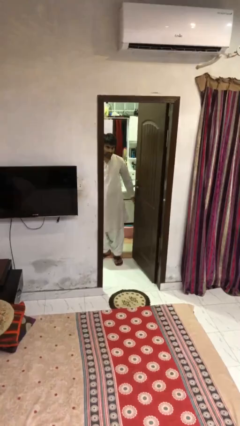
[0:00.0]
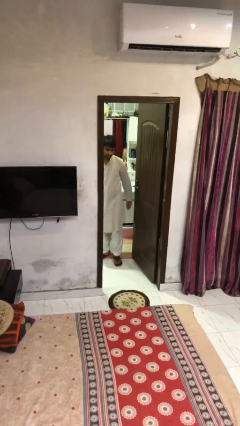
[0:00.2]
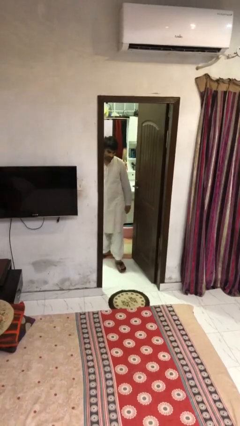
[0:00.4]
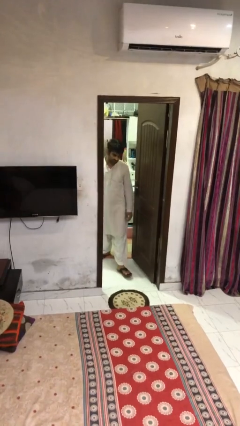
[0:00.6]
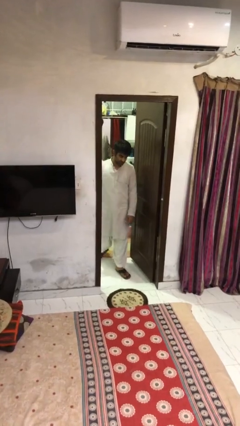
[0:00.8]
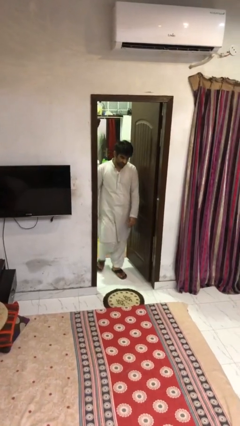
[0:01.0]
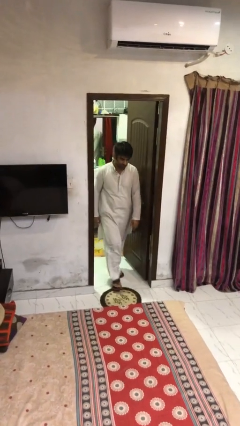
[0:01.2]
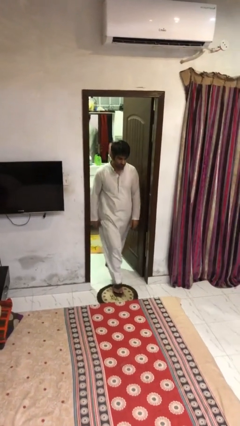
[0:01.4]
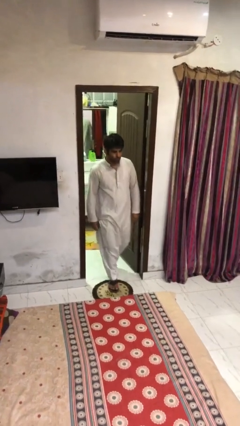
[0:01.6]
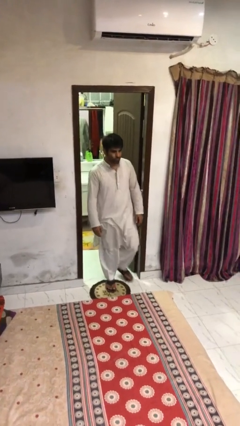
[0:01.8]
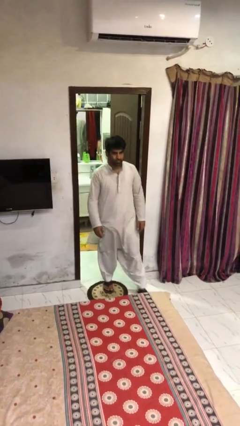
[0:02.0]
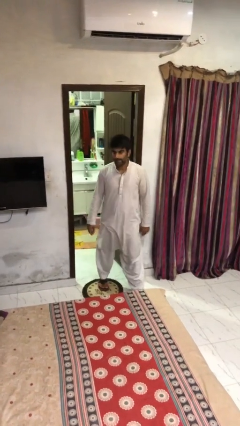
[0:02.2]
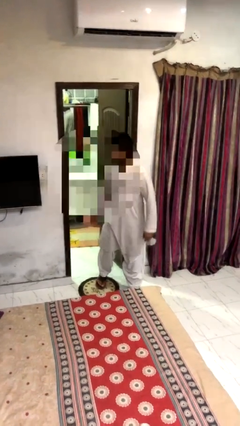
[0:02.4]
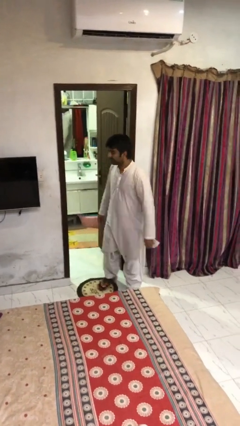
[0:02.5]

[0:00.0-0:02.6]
person enters scene through structure

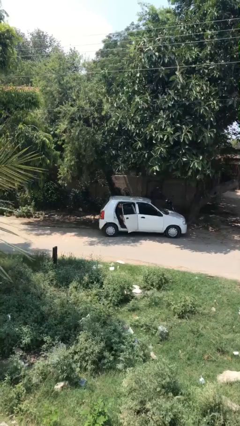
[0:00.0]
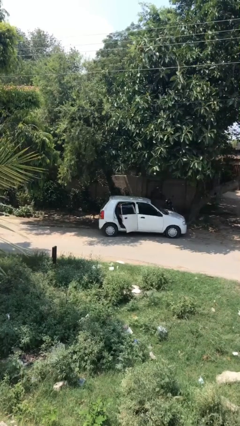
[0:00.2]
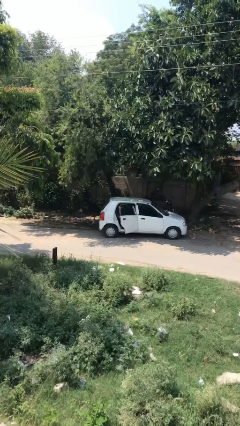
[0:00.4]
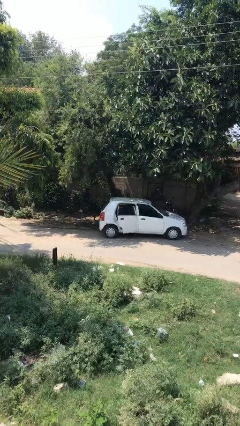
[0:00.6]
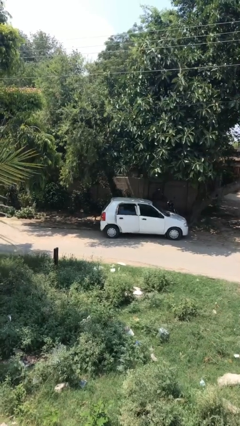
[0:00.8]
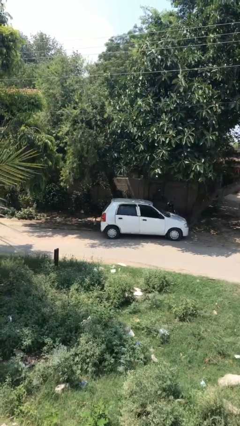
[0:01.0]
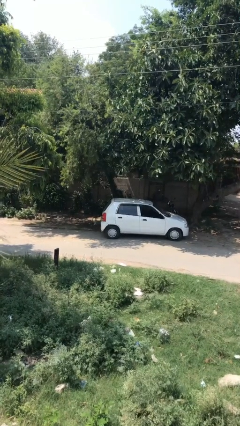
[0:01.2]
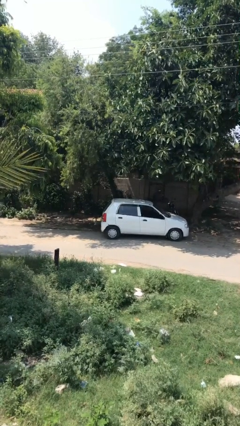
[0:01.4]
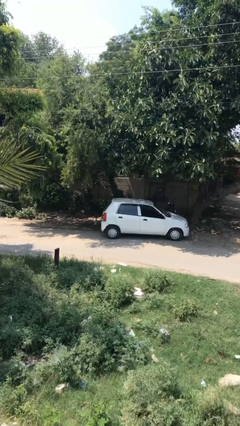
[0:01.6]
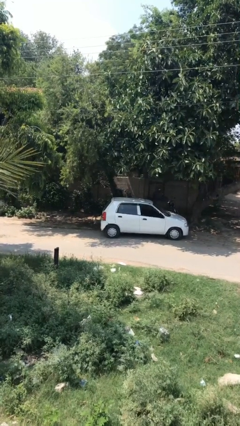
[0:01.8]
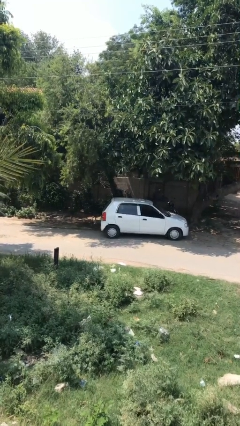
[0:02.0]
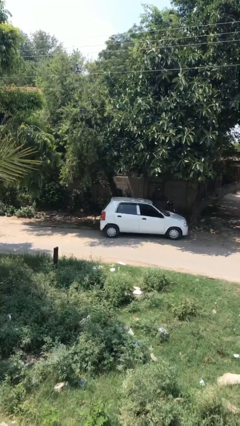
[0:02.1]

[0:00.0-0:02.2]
person closes car door

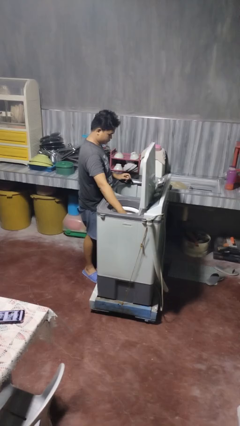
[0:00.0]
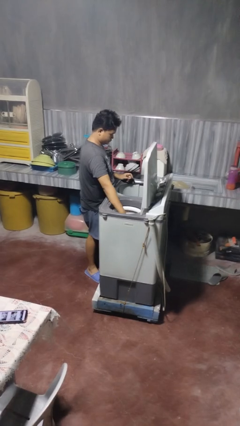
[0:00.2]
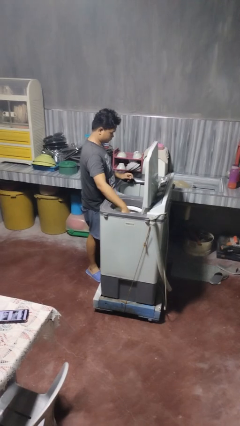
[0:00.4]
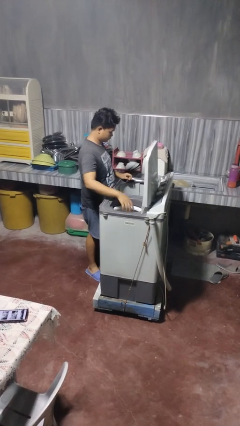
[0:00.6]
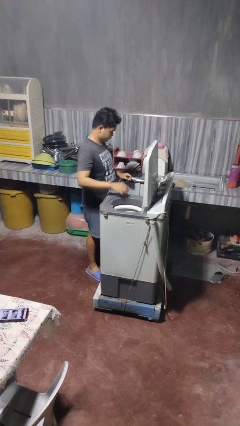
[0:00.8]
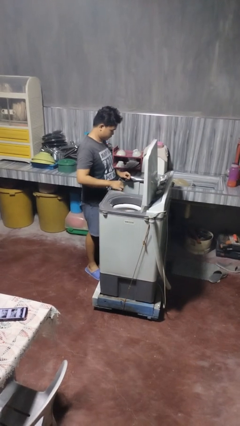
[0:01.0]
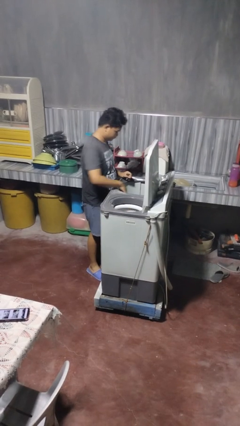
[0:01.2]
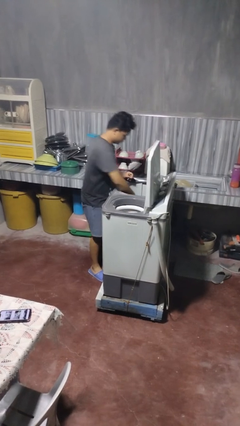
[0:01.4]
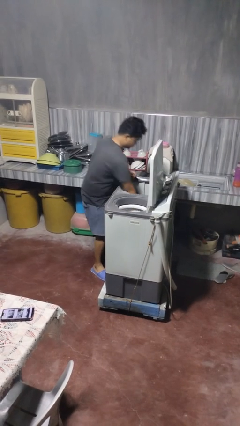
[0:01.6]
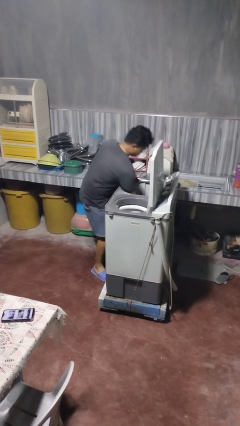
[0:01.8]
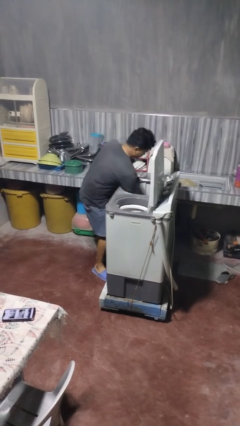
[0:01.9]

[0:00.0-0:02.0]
person loads dryer

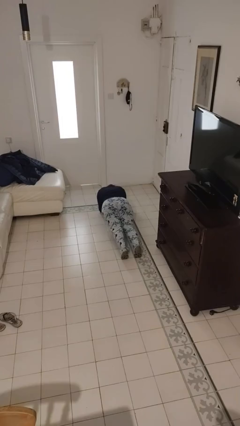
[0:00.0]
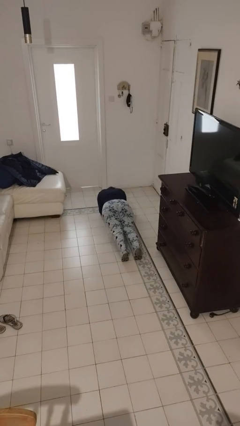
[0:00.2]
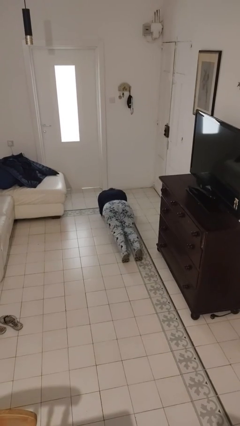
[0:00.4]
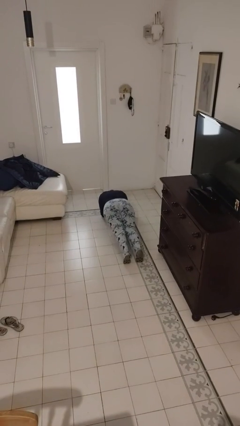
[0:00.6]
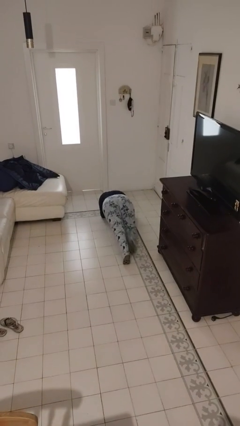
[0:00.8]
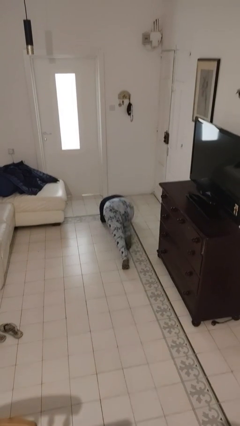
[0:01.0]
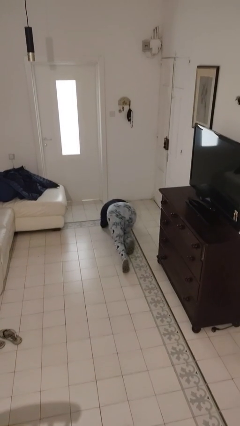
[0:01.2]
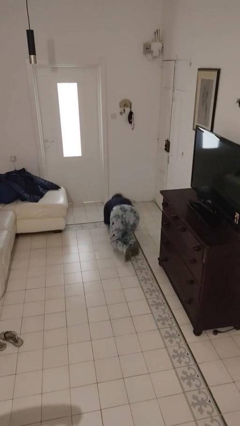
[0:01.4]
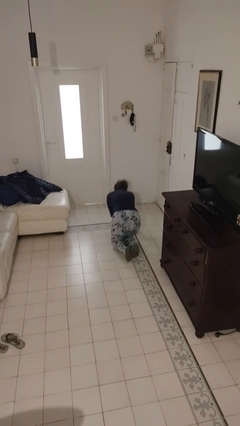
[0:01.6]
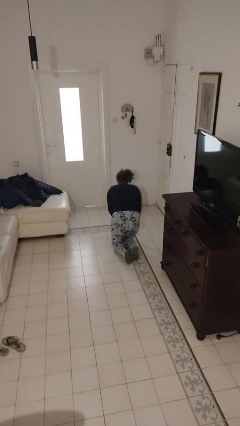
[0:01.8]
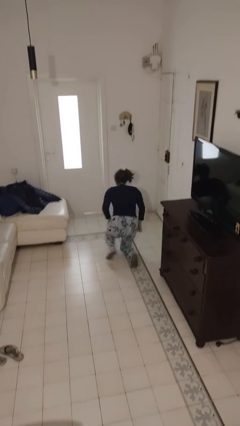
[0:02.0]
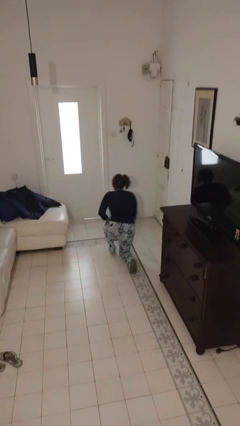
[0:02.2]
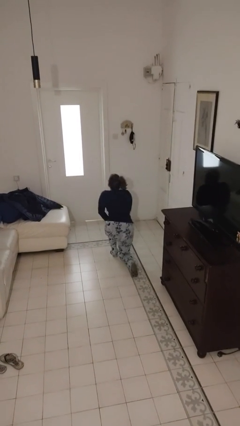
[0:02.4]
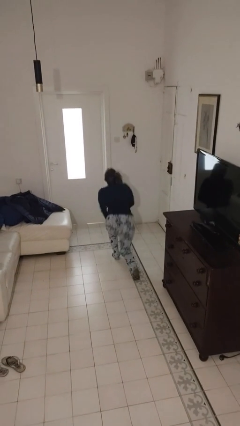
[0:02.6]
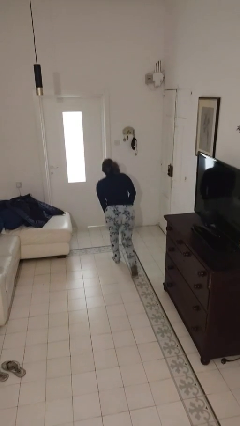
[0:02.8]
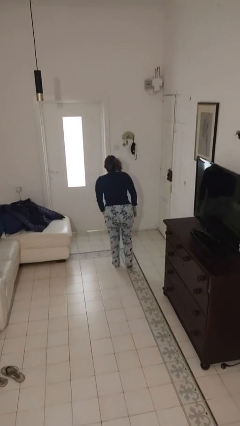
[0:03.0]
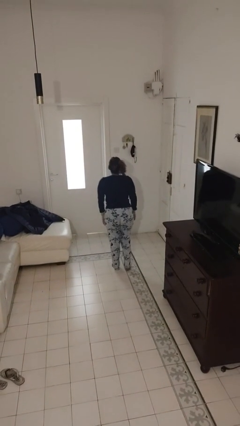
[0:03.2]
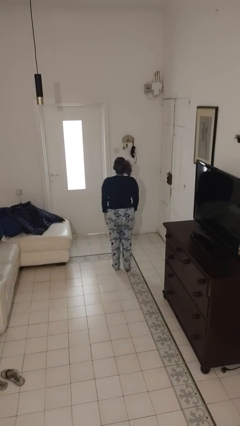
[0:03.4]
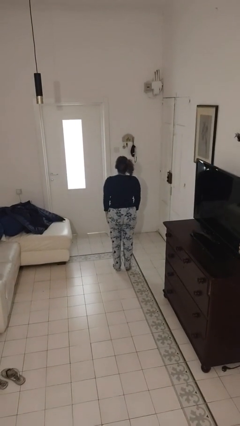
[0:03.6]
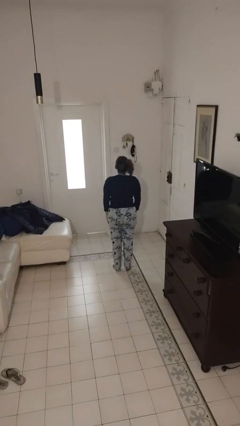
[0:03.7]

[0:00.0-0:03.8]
person stands up from floor

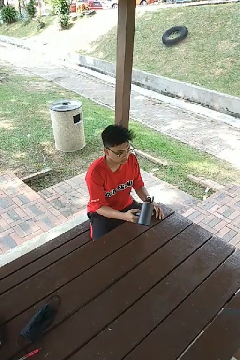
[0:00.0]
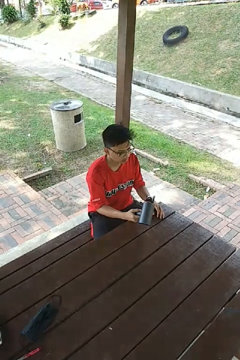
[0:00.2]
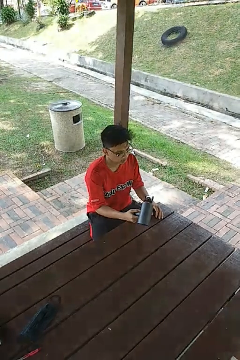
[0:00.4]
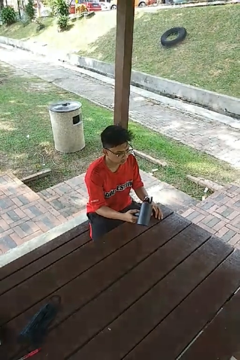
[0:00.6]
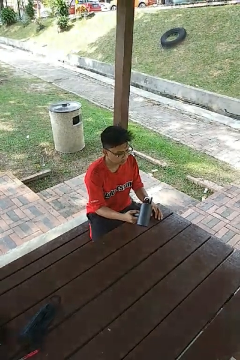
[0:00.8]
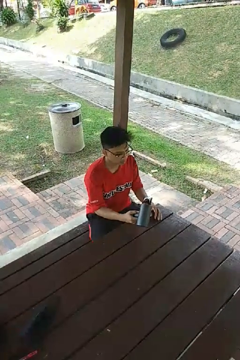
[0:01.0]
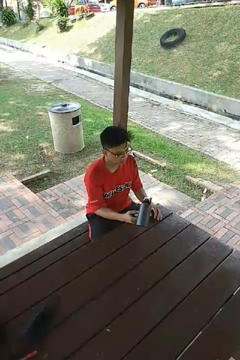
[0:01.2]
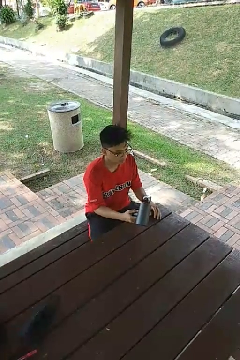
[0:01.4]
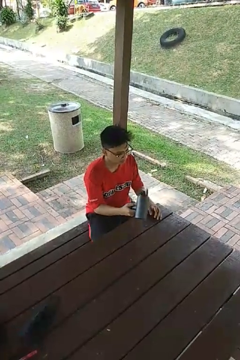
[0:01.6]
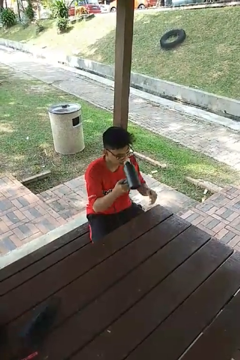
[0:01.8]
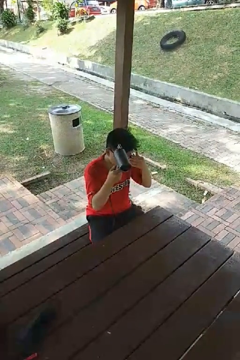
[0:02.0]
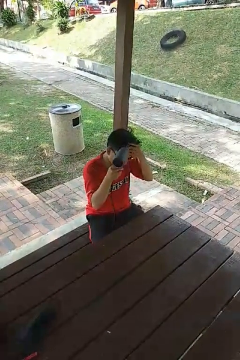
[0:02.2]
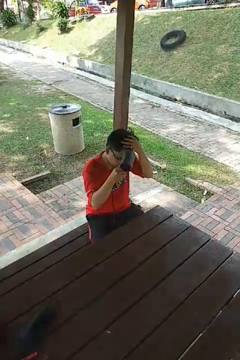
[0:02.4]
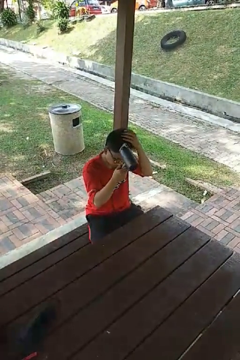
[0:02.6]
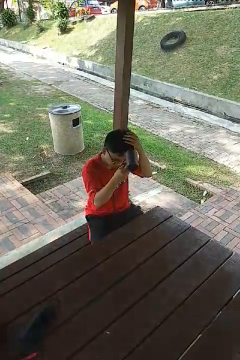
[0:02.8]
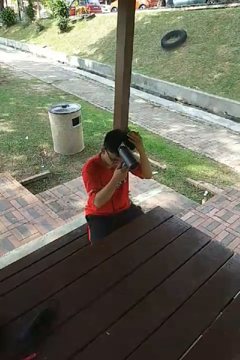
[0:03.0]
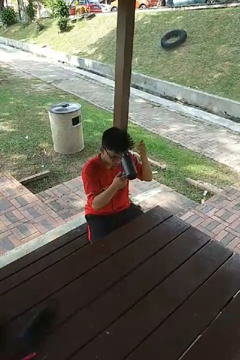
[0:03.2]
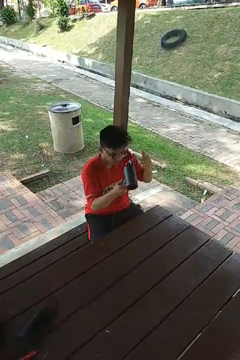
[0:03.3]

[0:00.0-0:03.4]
person dries hair with hairdryer

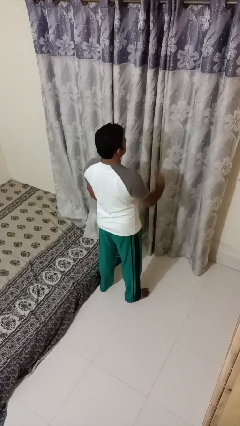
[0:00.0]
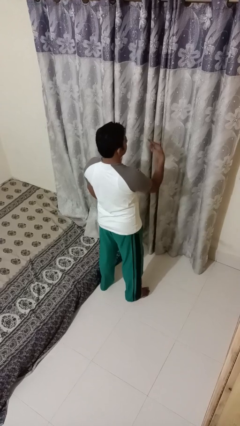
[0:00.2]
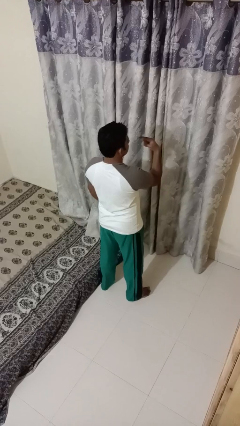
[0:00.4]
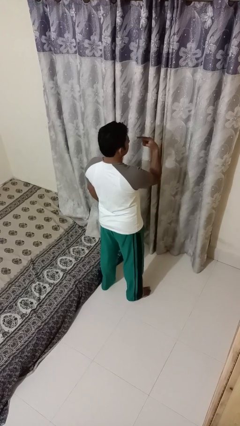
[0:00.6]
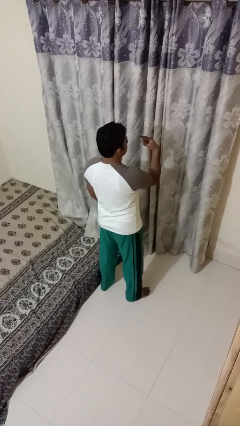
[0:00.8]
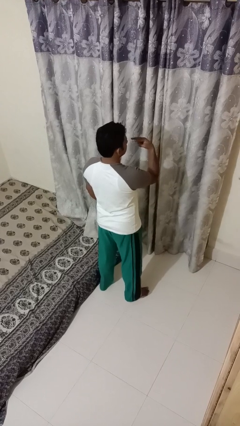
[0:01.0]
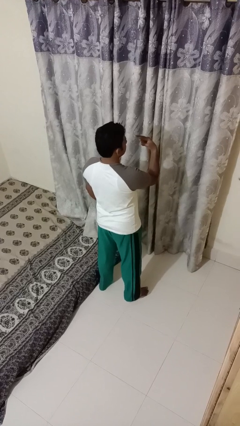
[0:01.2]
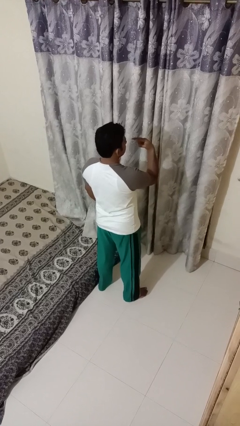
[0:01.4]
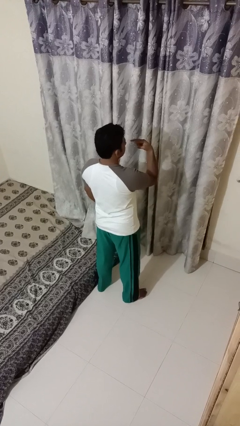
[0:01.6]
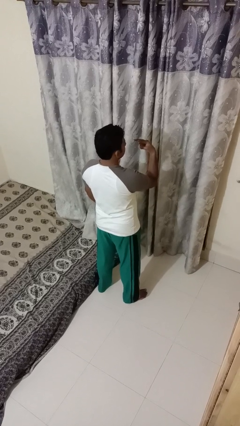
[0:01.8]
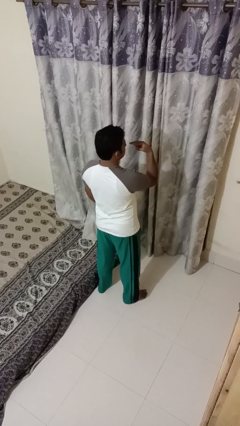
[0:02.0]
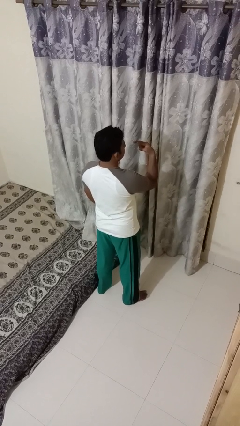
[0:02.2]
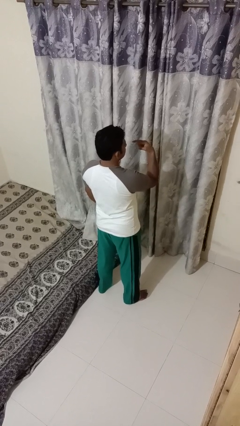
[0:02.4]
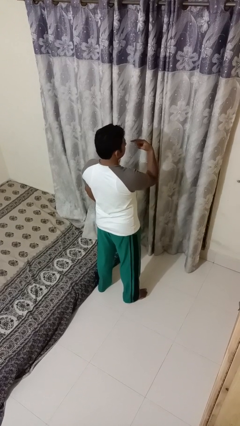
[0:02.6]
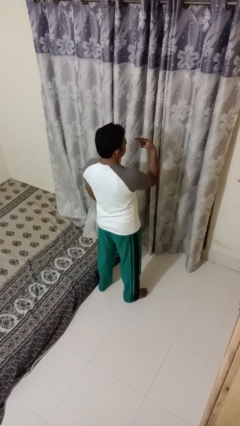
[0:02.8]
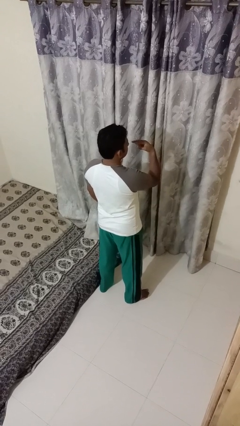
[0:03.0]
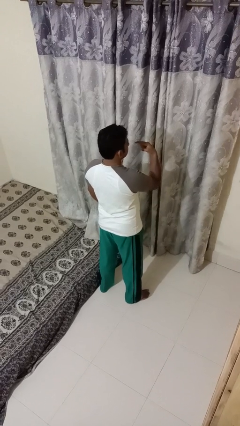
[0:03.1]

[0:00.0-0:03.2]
person gestures watch closely

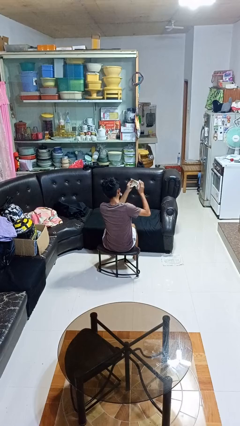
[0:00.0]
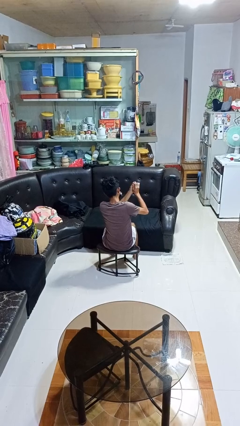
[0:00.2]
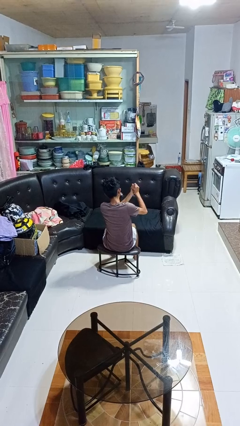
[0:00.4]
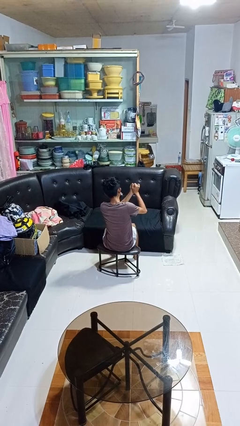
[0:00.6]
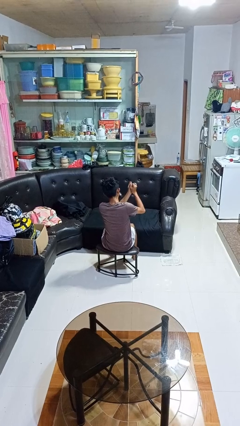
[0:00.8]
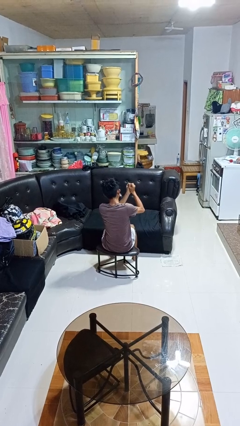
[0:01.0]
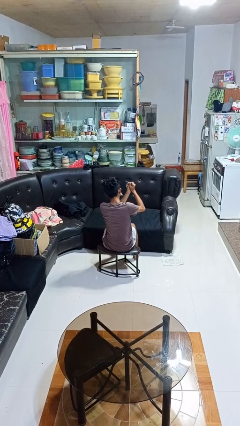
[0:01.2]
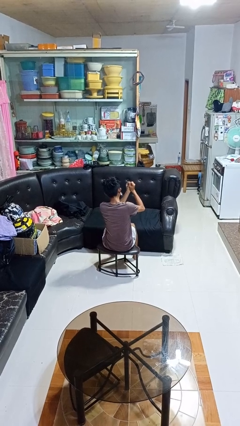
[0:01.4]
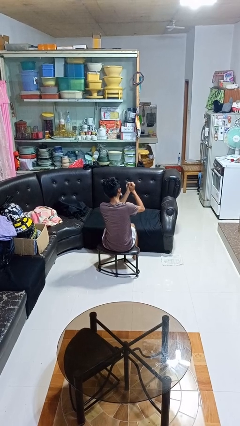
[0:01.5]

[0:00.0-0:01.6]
person crumples paper
